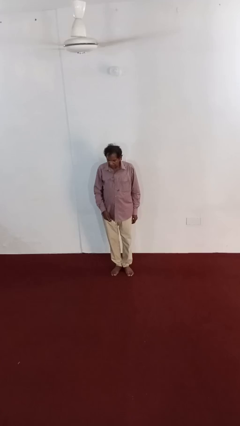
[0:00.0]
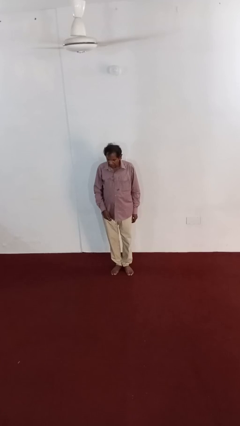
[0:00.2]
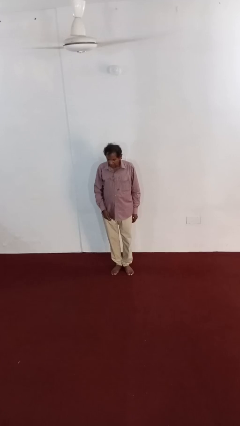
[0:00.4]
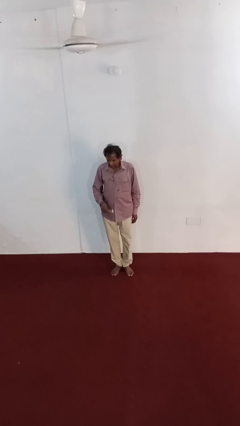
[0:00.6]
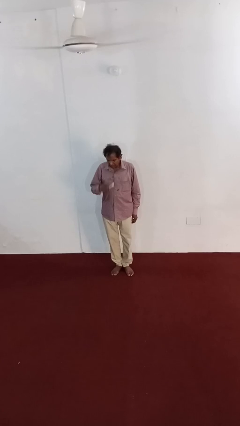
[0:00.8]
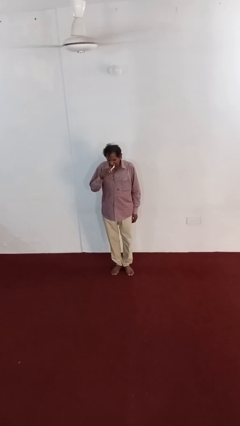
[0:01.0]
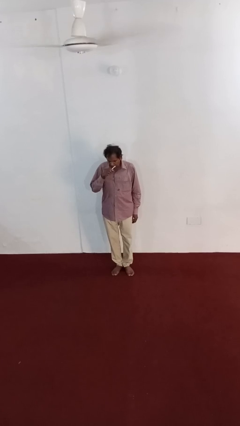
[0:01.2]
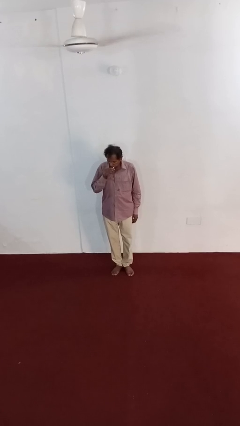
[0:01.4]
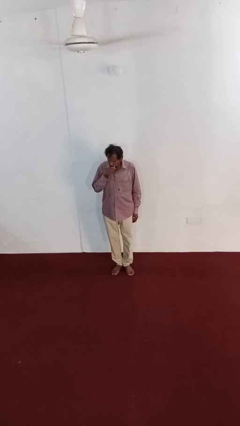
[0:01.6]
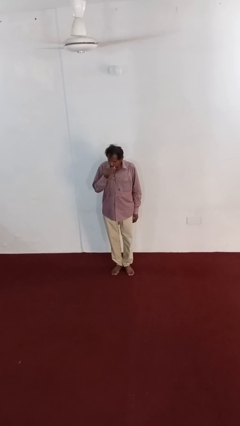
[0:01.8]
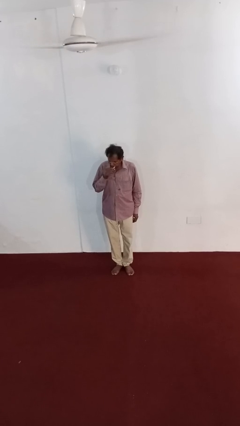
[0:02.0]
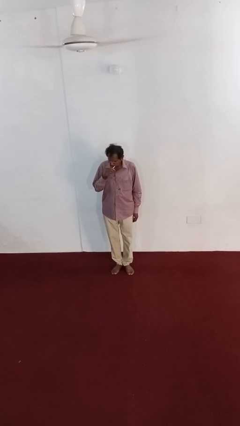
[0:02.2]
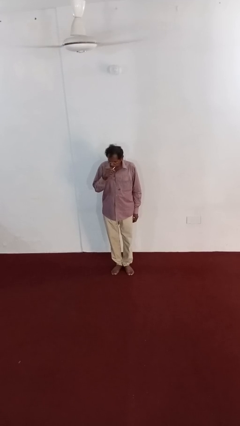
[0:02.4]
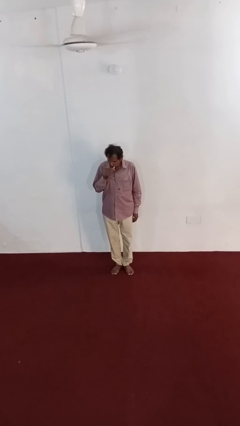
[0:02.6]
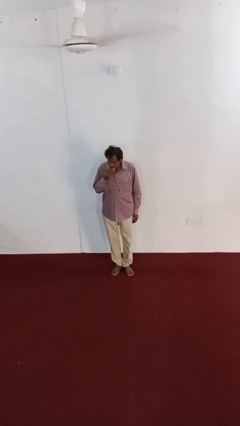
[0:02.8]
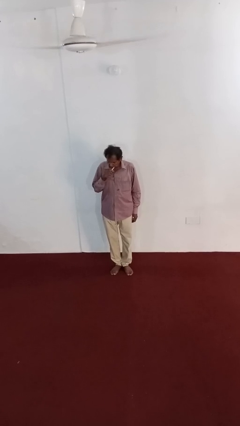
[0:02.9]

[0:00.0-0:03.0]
person brushes teeth

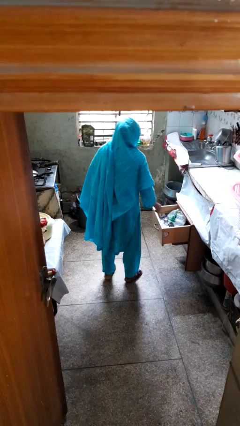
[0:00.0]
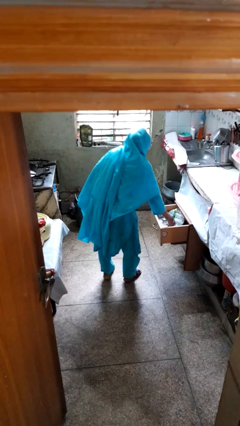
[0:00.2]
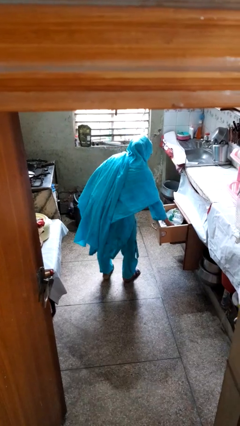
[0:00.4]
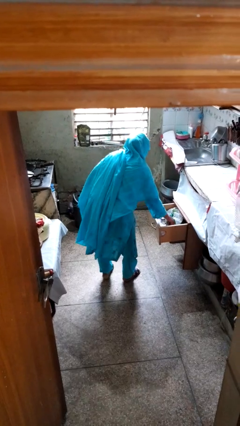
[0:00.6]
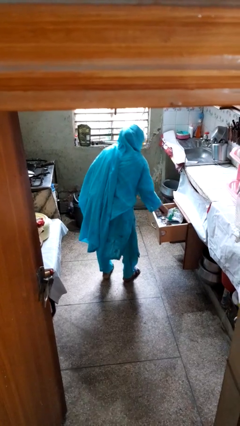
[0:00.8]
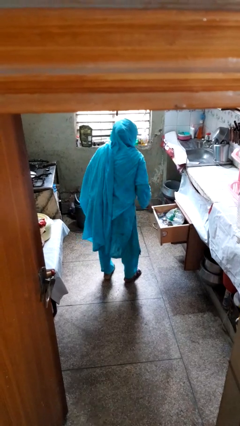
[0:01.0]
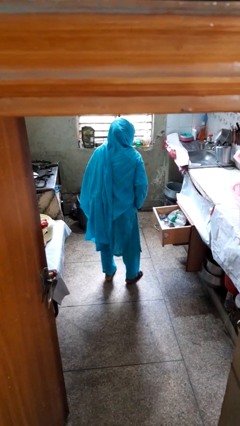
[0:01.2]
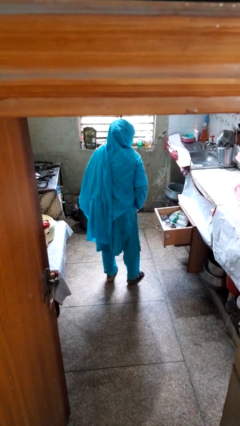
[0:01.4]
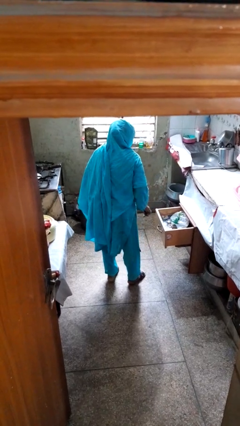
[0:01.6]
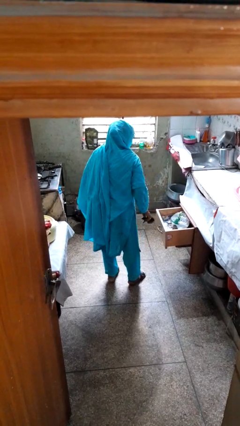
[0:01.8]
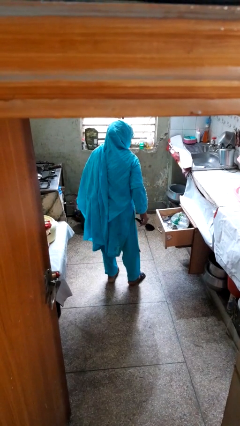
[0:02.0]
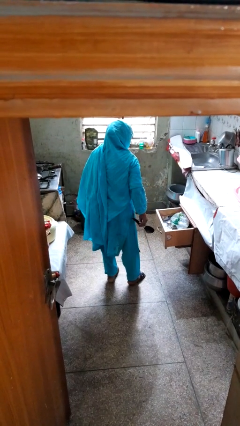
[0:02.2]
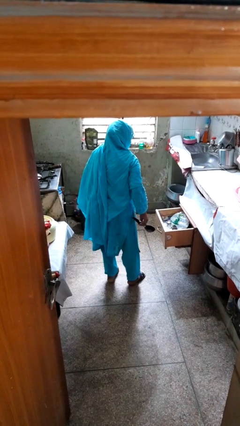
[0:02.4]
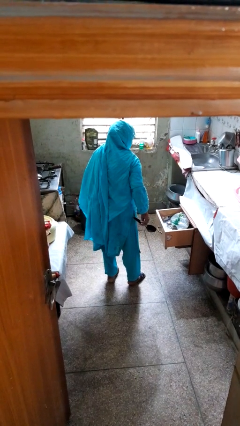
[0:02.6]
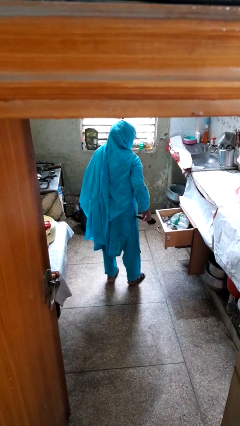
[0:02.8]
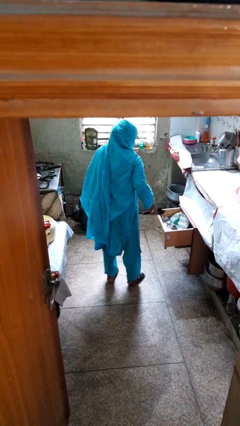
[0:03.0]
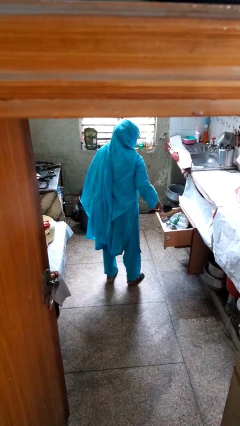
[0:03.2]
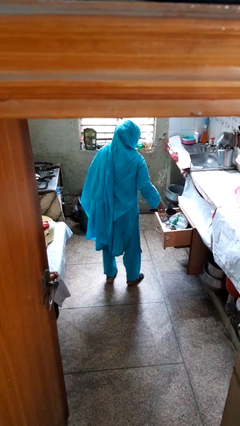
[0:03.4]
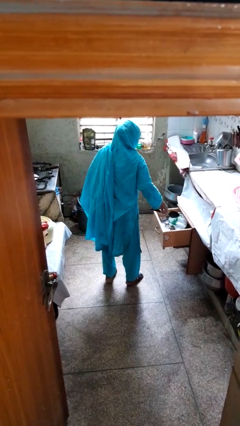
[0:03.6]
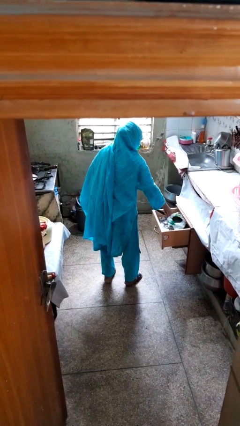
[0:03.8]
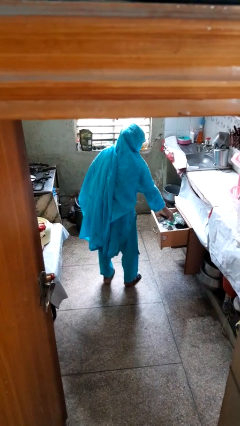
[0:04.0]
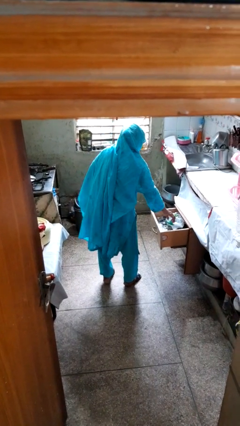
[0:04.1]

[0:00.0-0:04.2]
person takes object from kitchen drawer

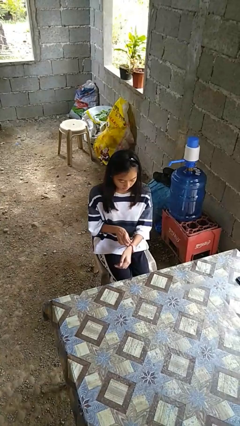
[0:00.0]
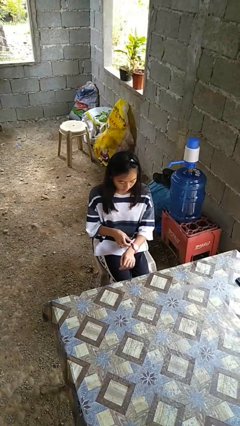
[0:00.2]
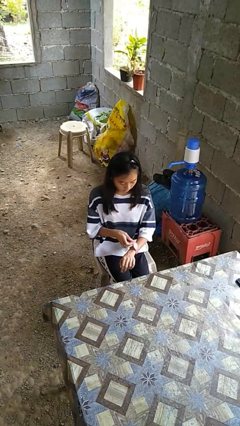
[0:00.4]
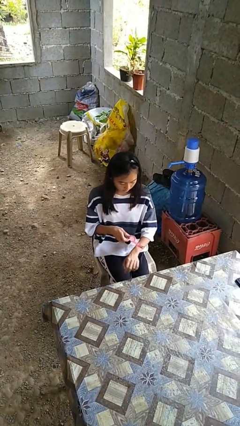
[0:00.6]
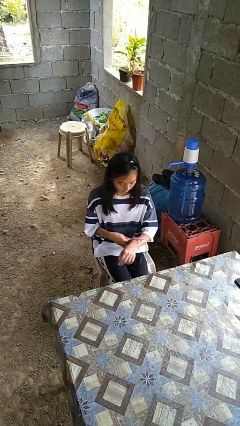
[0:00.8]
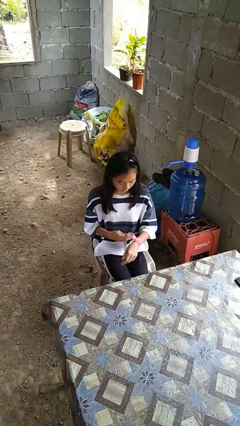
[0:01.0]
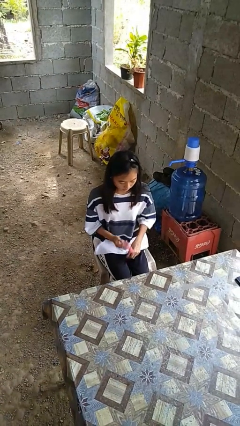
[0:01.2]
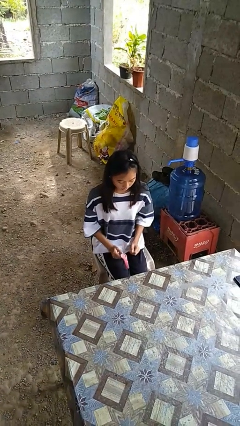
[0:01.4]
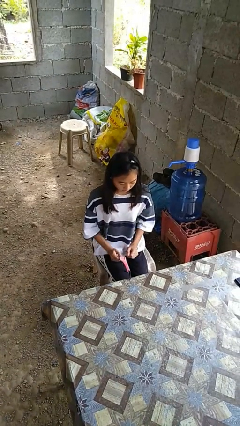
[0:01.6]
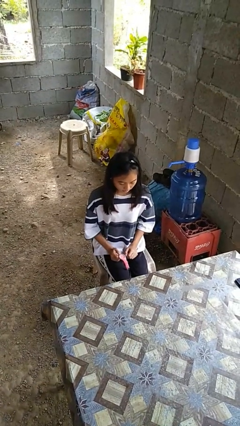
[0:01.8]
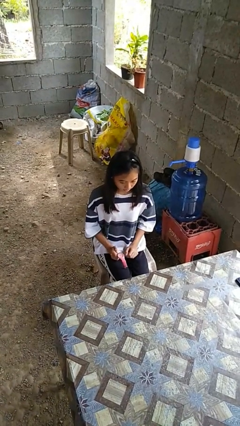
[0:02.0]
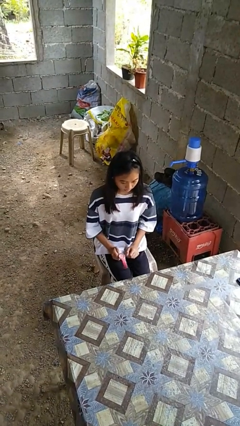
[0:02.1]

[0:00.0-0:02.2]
person takes off wristwatch

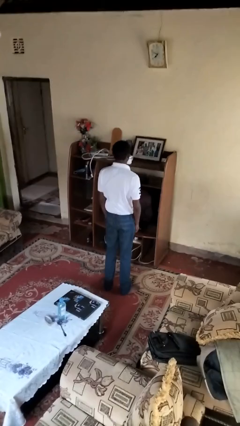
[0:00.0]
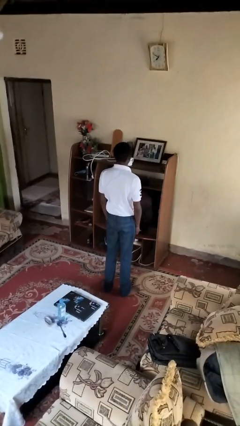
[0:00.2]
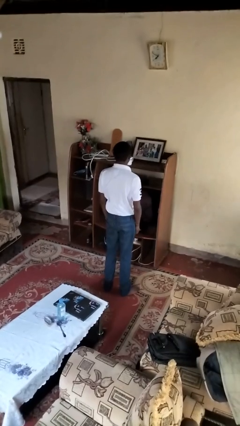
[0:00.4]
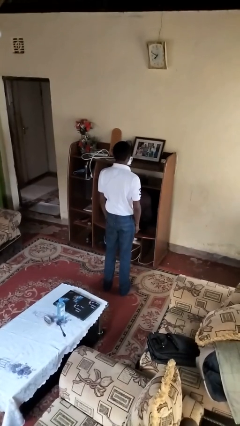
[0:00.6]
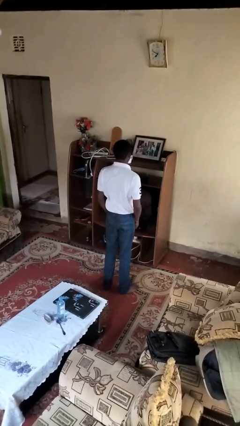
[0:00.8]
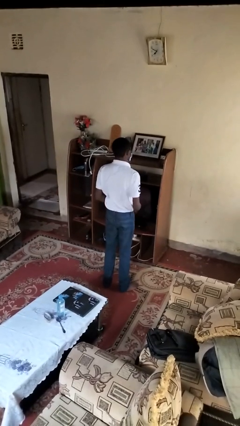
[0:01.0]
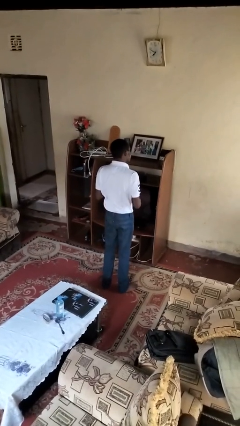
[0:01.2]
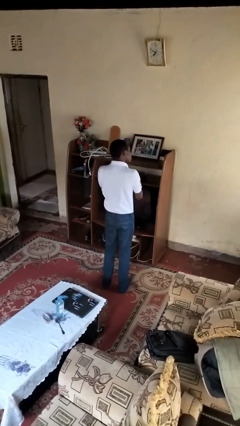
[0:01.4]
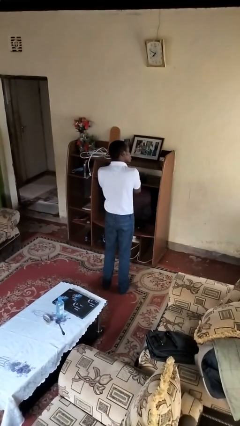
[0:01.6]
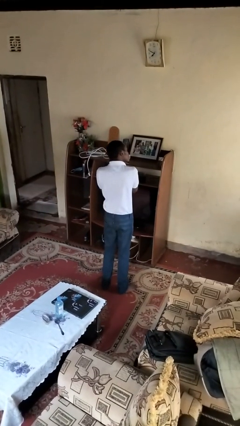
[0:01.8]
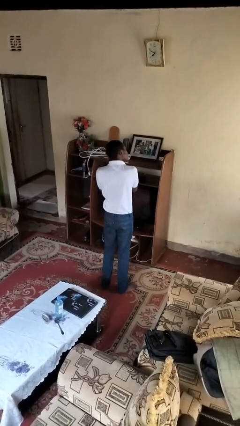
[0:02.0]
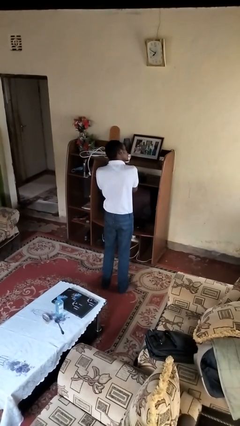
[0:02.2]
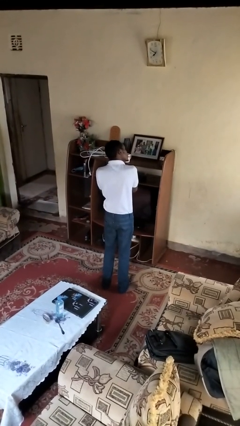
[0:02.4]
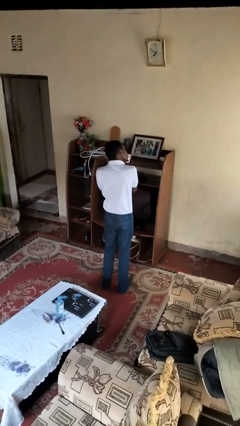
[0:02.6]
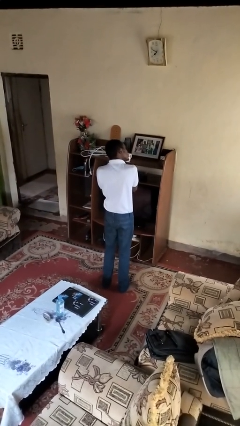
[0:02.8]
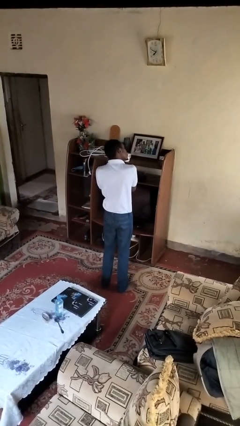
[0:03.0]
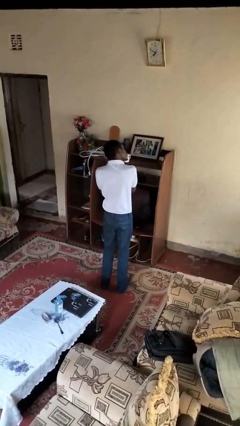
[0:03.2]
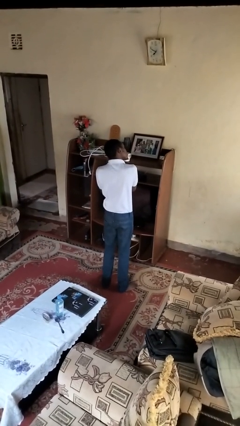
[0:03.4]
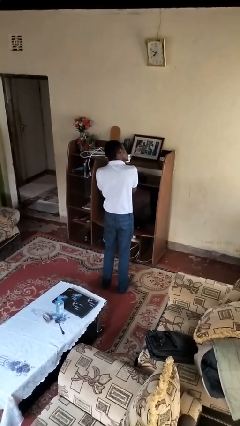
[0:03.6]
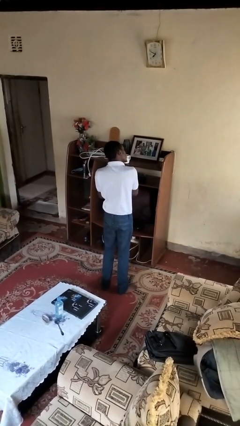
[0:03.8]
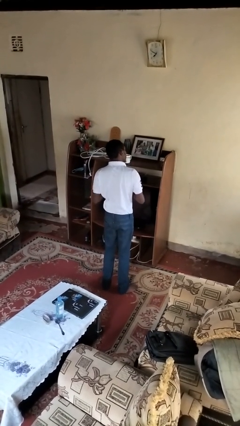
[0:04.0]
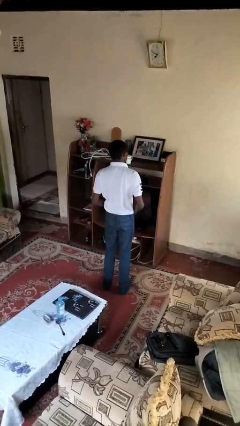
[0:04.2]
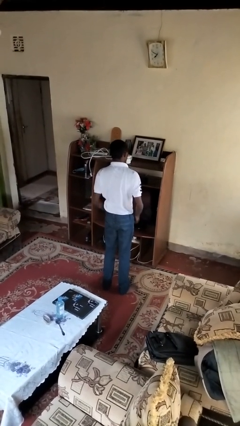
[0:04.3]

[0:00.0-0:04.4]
person puts on earrings

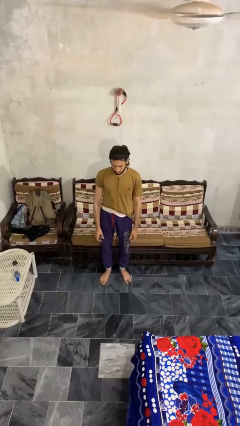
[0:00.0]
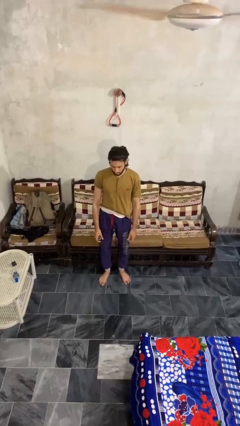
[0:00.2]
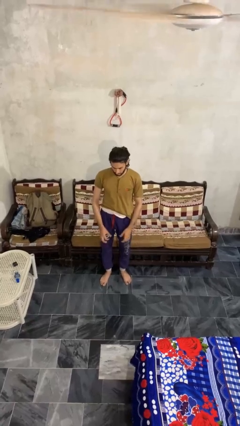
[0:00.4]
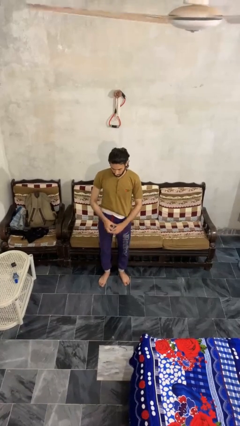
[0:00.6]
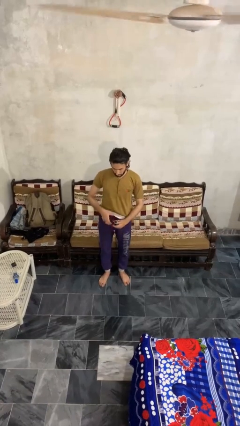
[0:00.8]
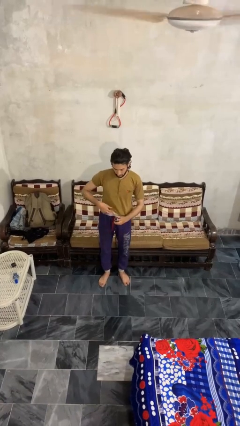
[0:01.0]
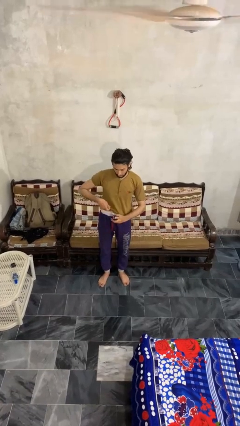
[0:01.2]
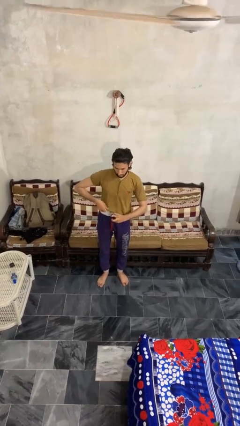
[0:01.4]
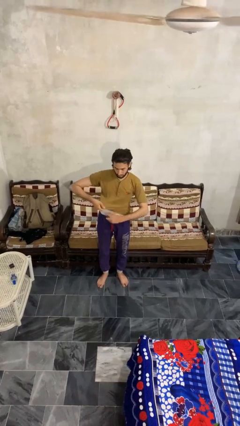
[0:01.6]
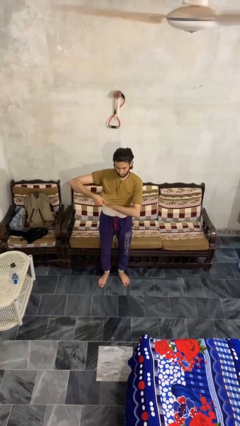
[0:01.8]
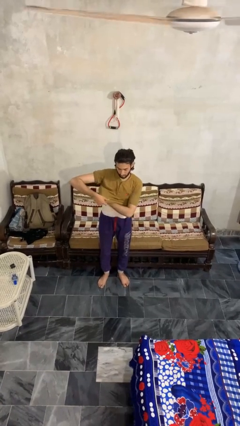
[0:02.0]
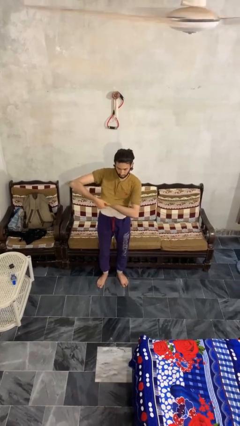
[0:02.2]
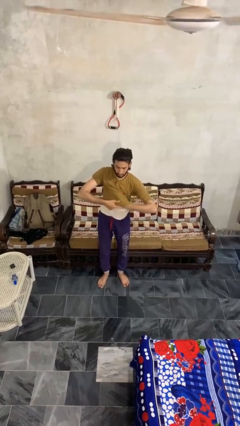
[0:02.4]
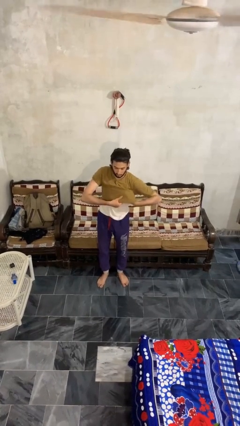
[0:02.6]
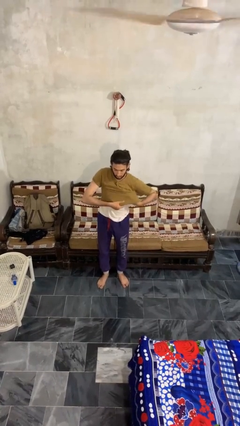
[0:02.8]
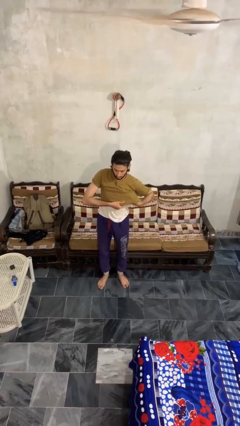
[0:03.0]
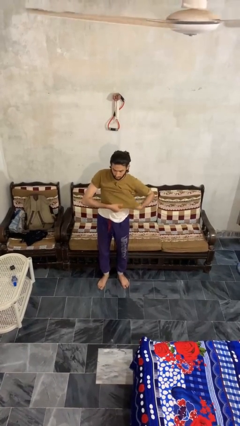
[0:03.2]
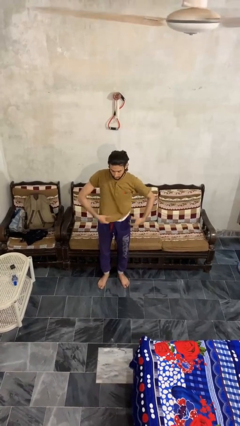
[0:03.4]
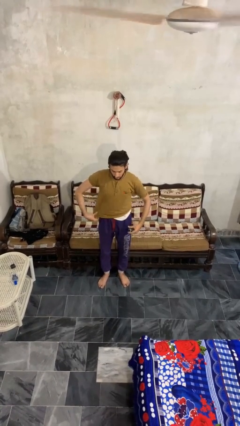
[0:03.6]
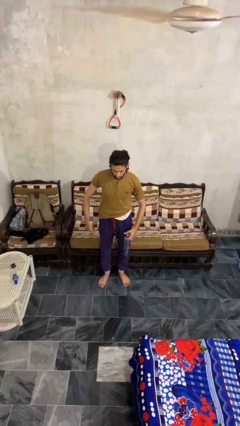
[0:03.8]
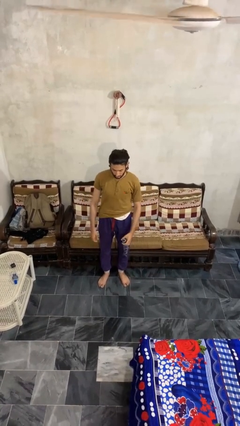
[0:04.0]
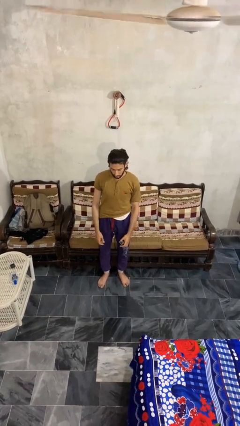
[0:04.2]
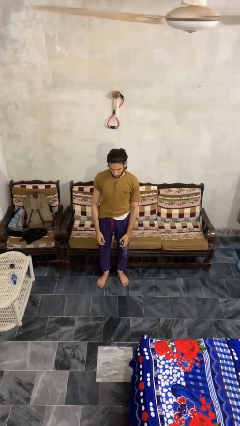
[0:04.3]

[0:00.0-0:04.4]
person applies deodorant
